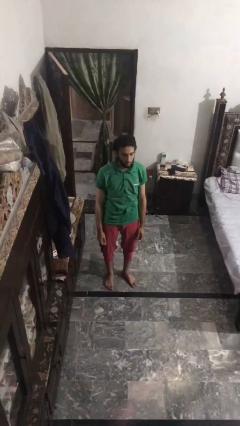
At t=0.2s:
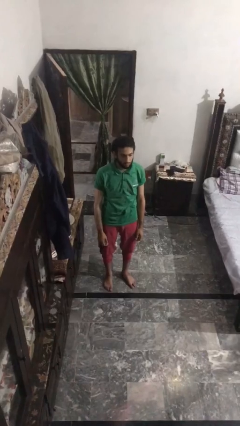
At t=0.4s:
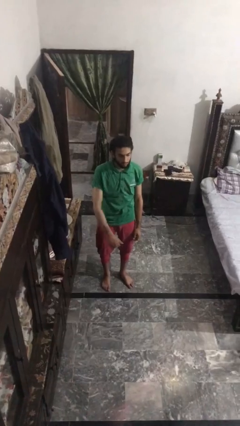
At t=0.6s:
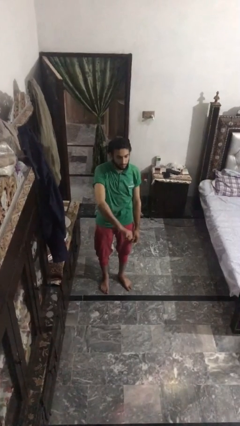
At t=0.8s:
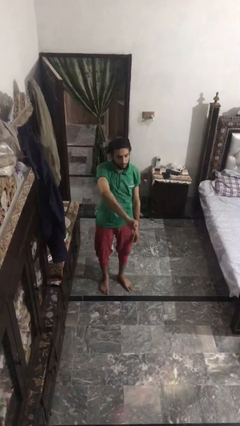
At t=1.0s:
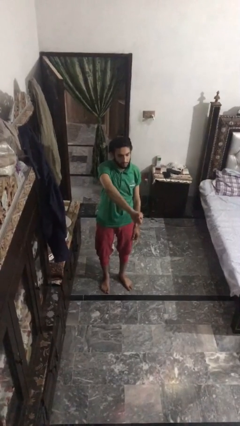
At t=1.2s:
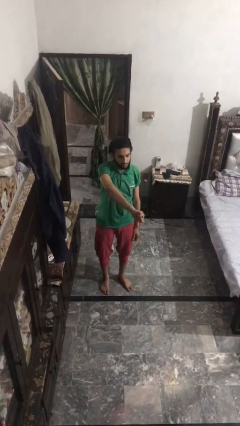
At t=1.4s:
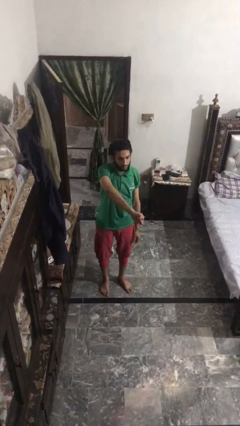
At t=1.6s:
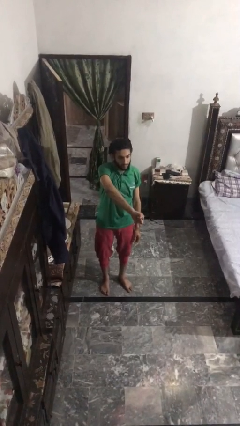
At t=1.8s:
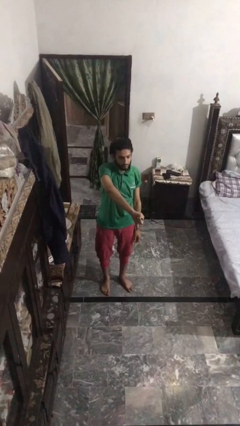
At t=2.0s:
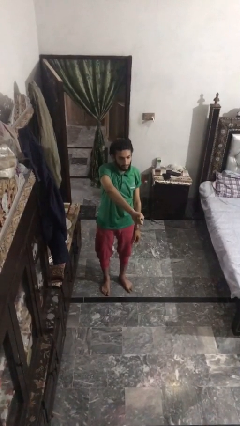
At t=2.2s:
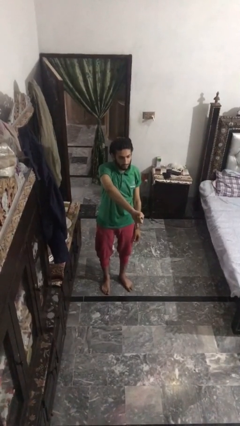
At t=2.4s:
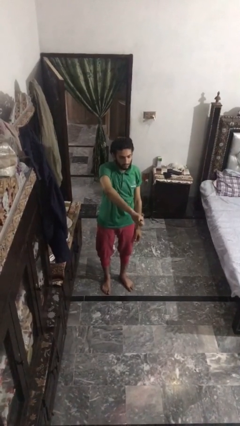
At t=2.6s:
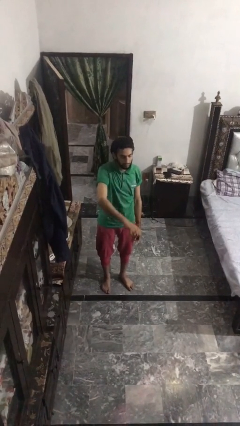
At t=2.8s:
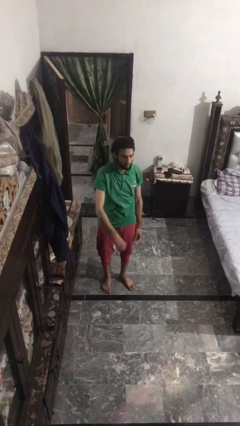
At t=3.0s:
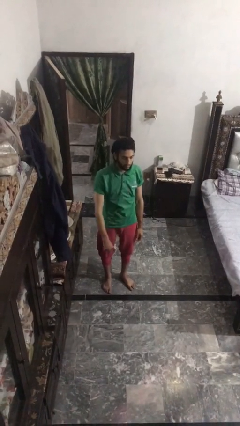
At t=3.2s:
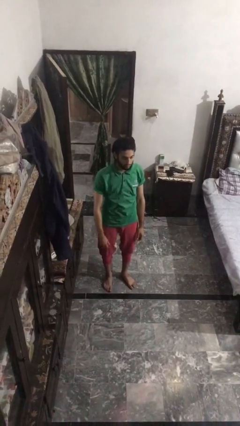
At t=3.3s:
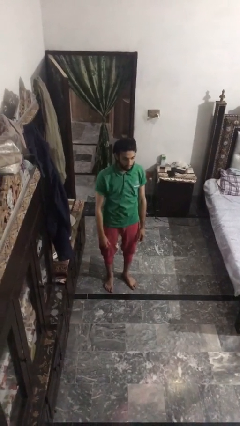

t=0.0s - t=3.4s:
person gestures thumbs down

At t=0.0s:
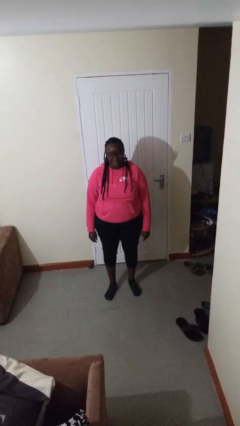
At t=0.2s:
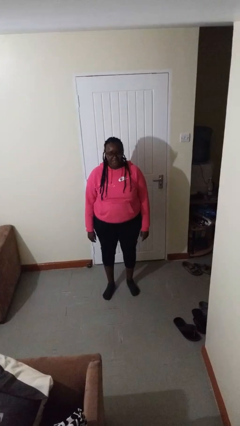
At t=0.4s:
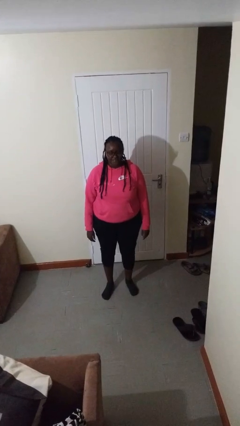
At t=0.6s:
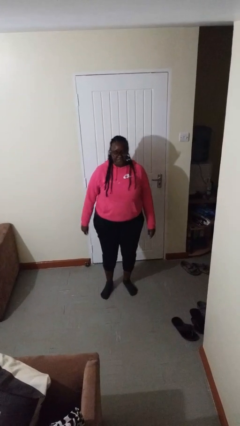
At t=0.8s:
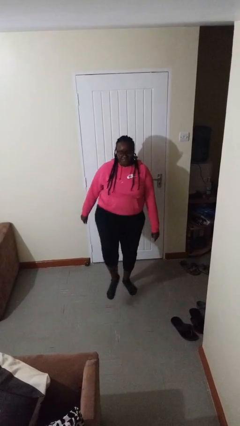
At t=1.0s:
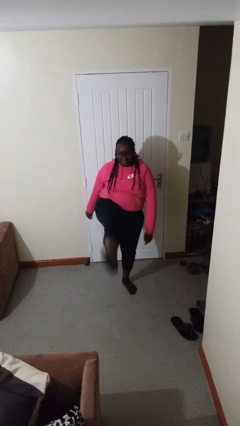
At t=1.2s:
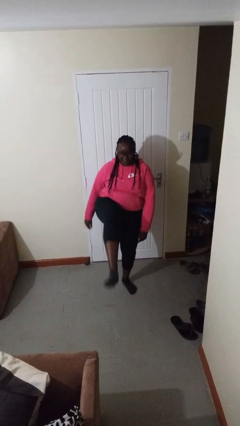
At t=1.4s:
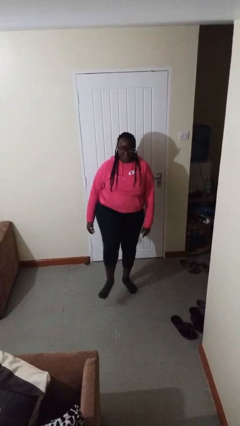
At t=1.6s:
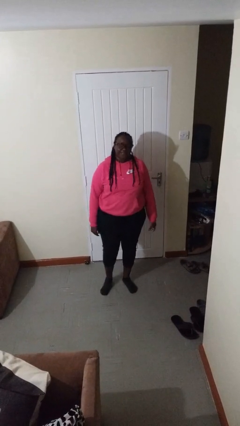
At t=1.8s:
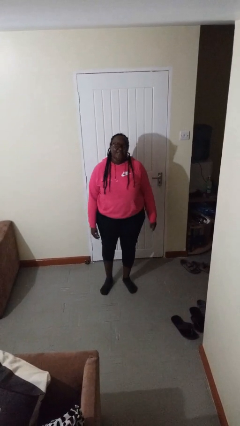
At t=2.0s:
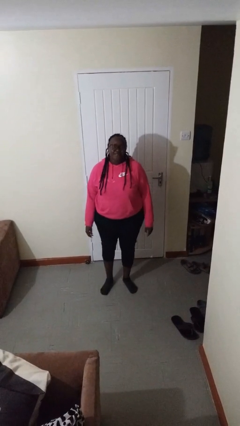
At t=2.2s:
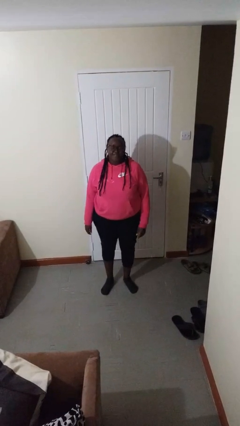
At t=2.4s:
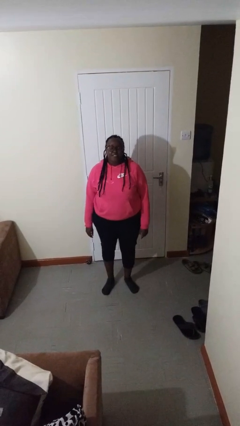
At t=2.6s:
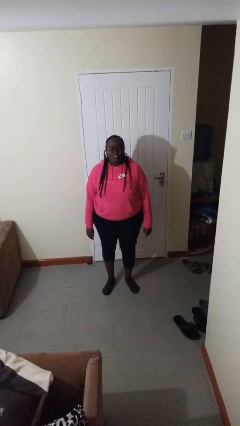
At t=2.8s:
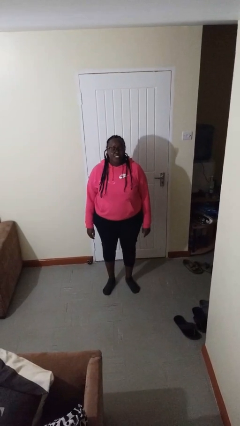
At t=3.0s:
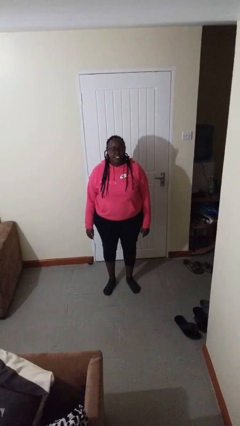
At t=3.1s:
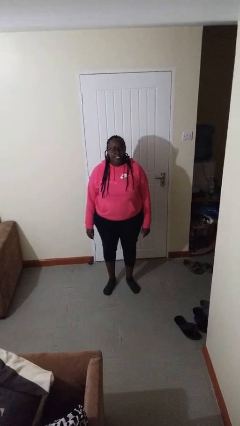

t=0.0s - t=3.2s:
person karate kicks

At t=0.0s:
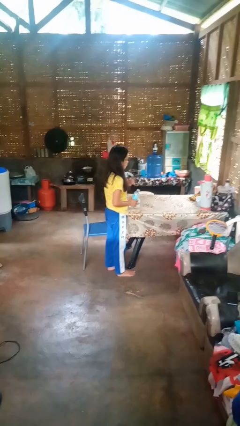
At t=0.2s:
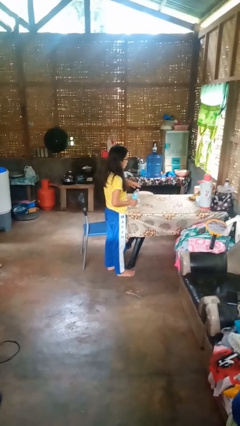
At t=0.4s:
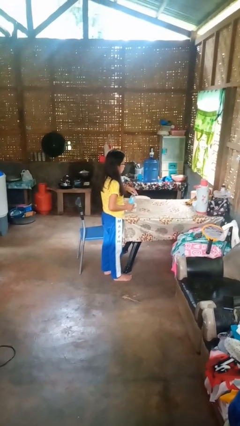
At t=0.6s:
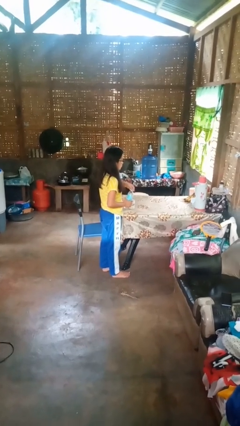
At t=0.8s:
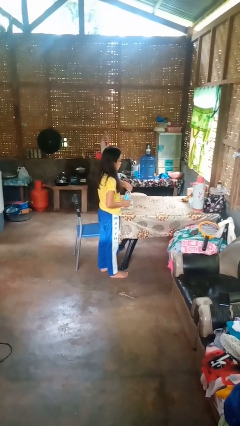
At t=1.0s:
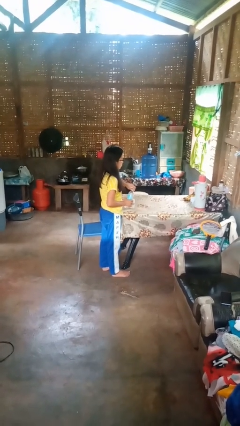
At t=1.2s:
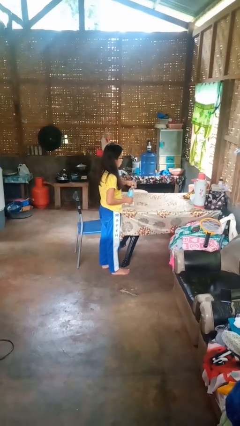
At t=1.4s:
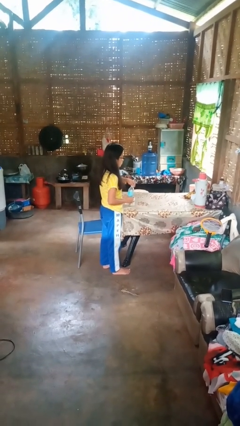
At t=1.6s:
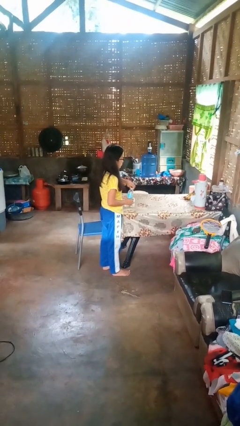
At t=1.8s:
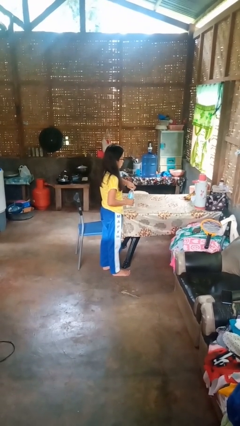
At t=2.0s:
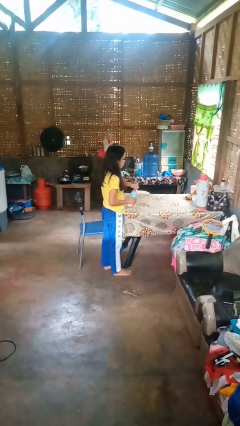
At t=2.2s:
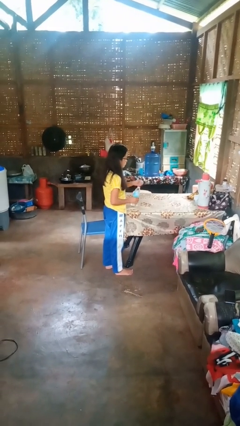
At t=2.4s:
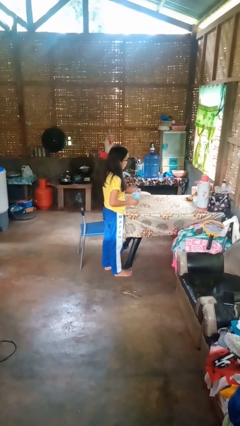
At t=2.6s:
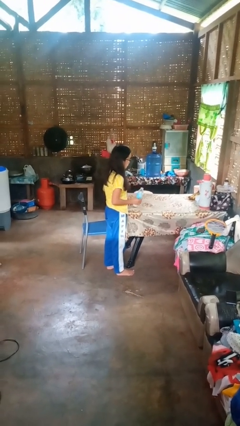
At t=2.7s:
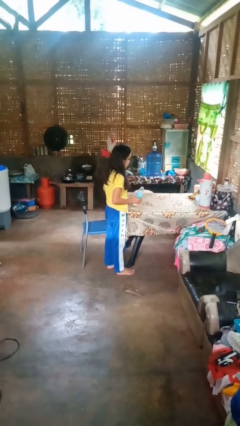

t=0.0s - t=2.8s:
person unscrews lid from bottle

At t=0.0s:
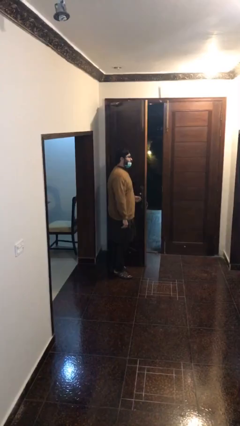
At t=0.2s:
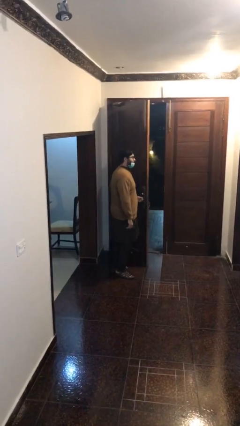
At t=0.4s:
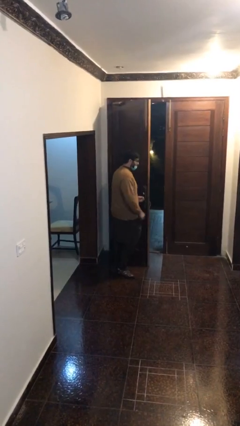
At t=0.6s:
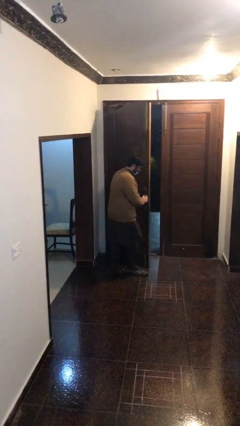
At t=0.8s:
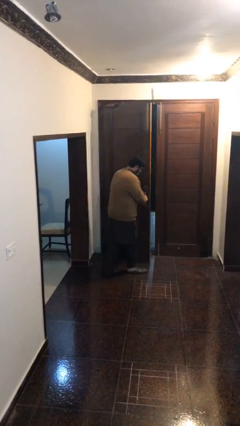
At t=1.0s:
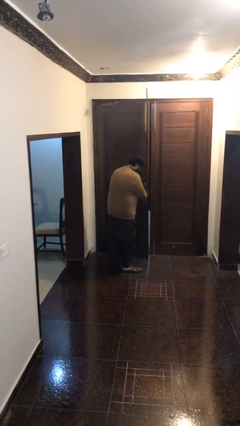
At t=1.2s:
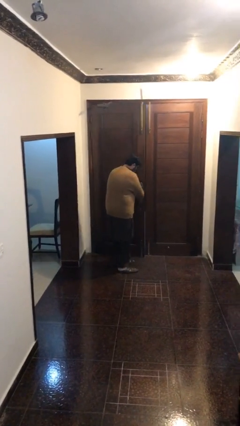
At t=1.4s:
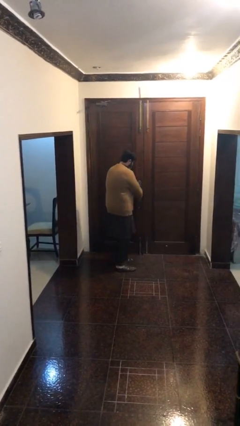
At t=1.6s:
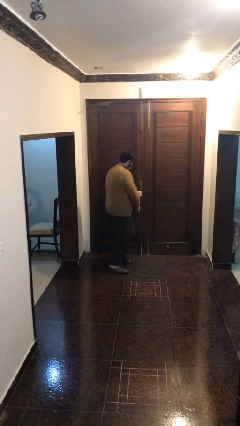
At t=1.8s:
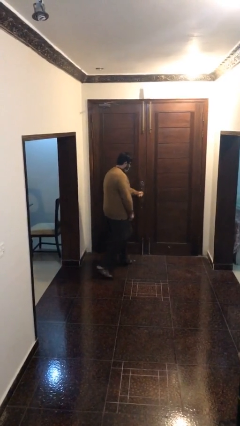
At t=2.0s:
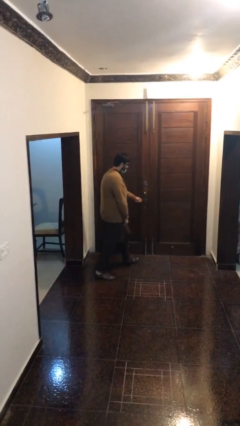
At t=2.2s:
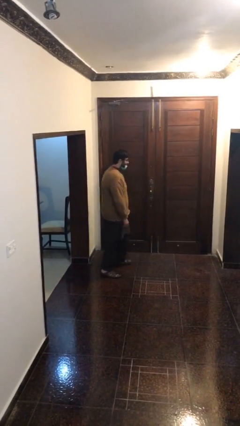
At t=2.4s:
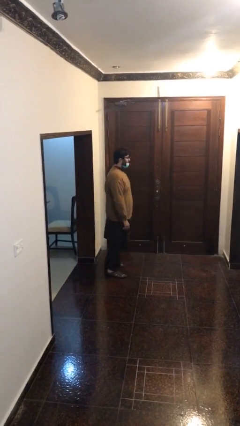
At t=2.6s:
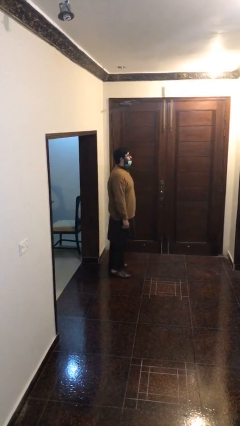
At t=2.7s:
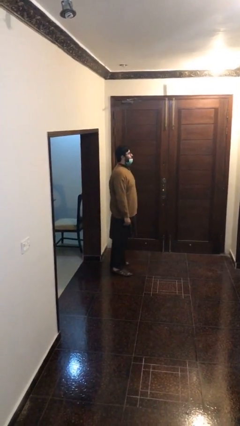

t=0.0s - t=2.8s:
person closes facility door

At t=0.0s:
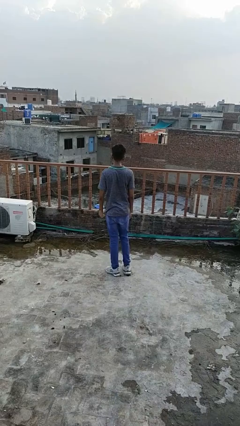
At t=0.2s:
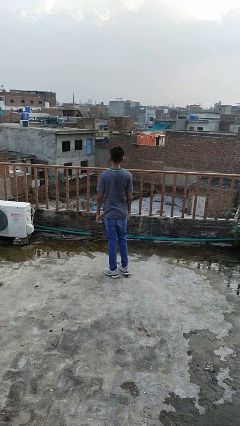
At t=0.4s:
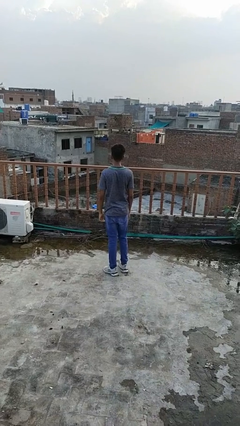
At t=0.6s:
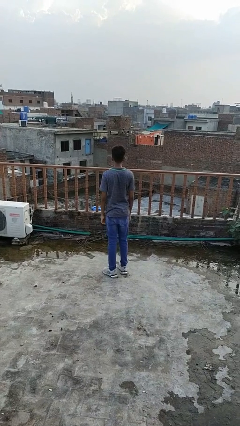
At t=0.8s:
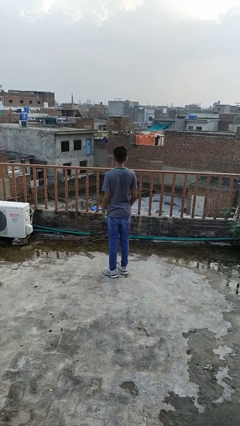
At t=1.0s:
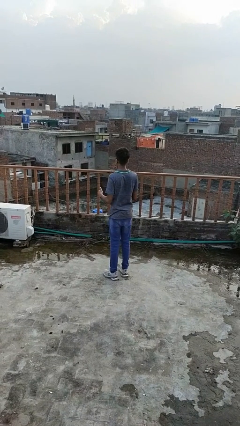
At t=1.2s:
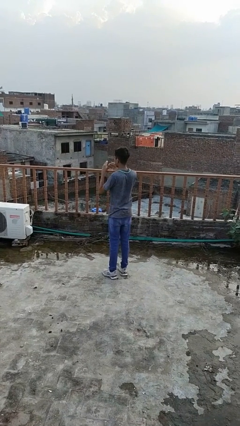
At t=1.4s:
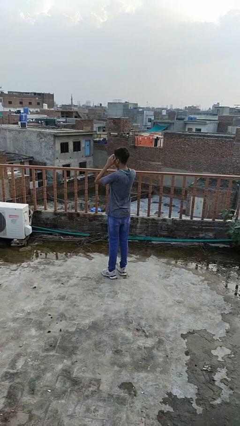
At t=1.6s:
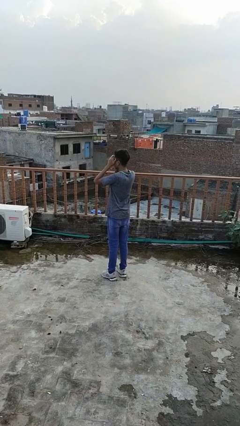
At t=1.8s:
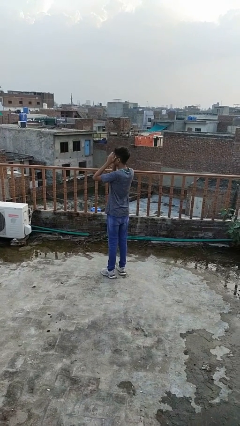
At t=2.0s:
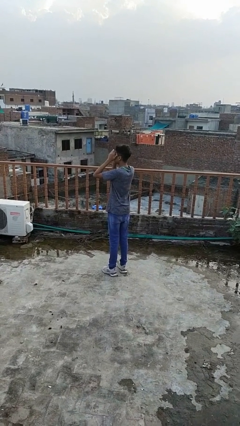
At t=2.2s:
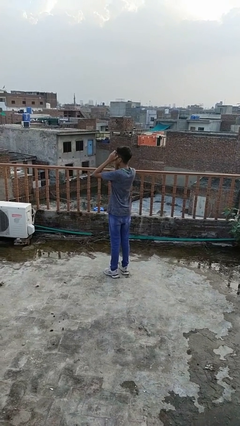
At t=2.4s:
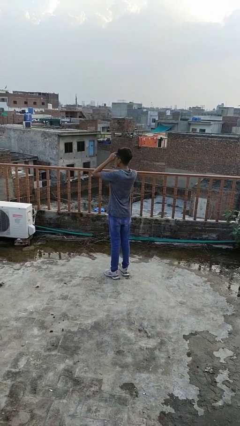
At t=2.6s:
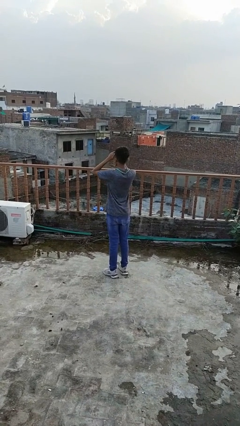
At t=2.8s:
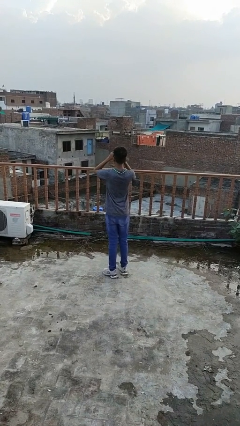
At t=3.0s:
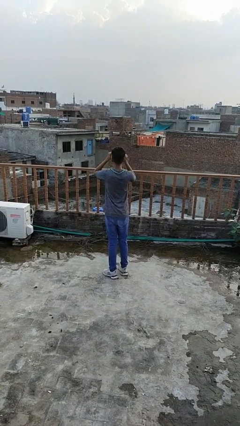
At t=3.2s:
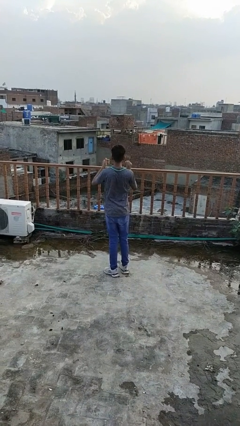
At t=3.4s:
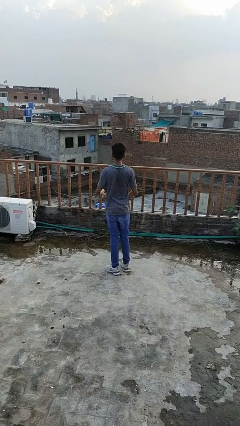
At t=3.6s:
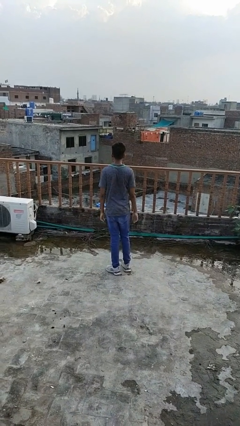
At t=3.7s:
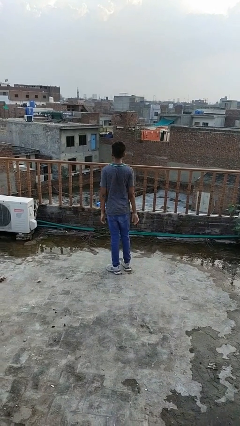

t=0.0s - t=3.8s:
person shades eyes

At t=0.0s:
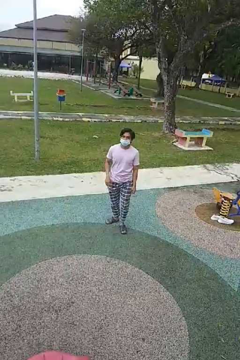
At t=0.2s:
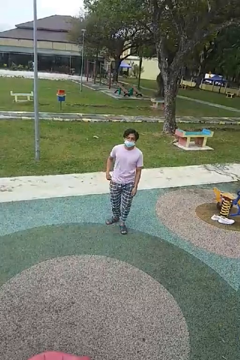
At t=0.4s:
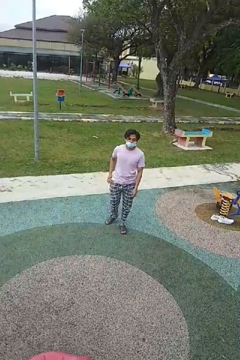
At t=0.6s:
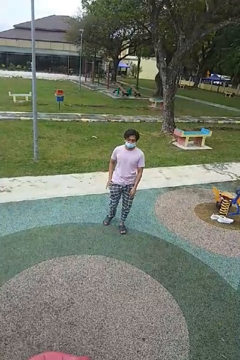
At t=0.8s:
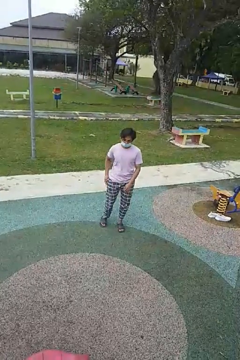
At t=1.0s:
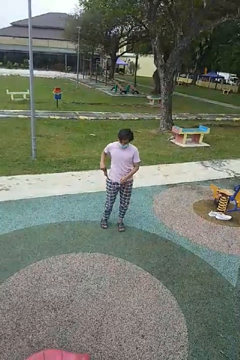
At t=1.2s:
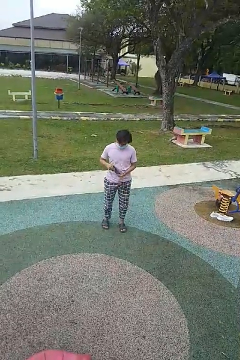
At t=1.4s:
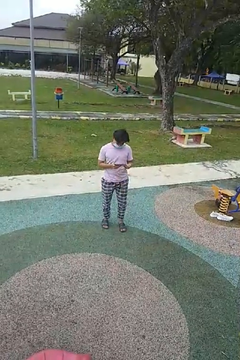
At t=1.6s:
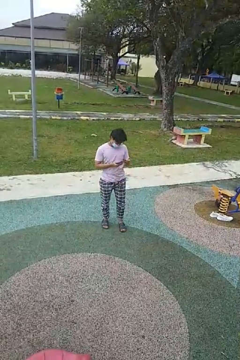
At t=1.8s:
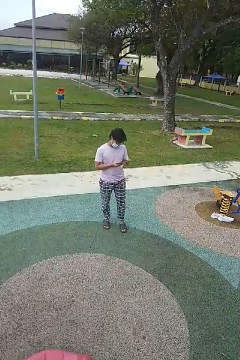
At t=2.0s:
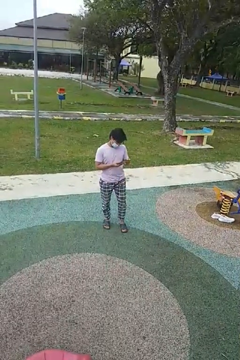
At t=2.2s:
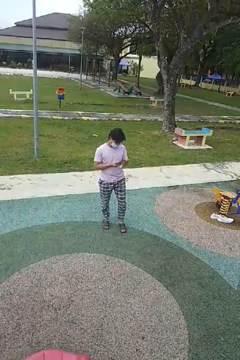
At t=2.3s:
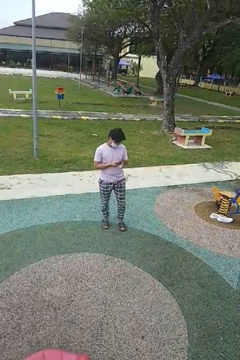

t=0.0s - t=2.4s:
person takes phone from pocket
